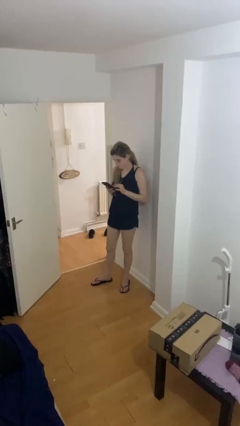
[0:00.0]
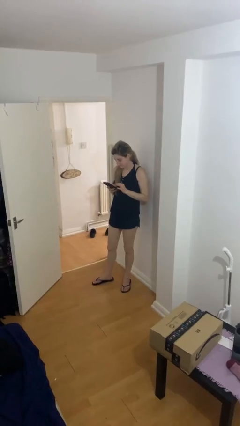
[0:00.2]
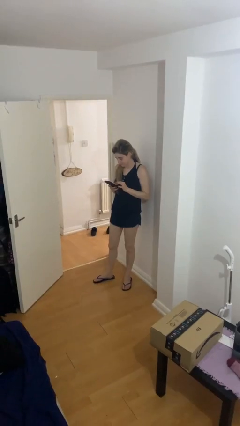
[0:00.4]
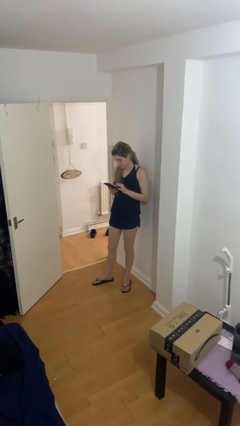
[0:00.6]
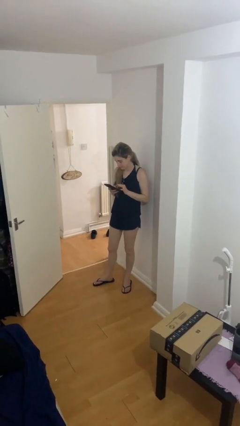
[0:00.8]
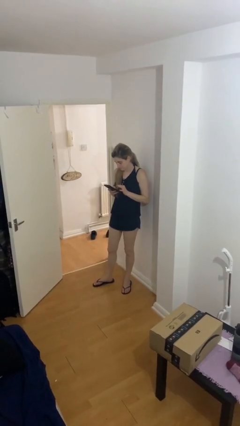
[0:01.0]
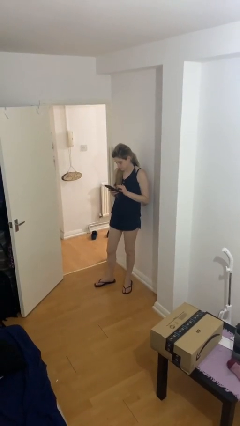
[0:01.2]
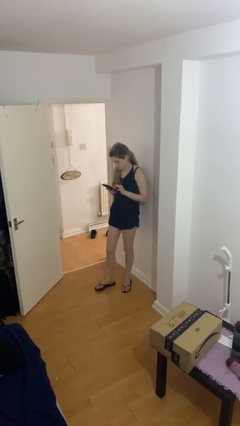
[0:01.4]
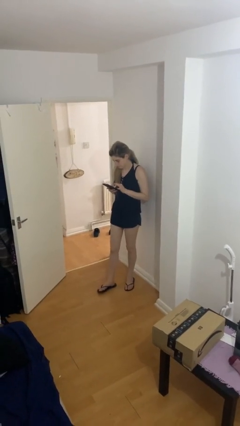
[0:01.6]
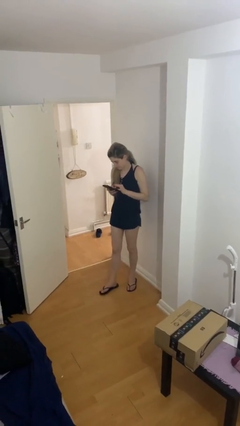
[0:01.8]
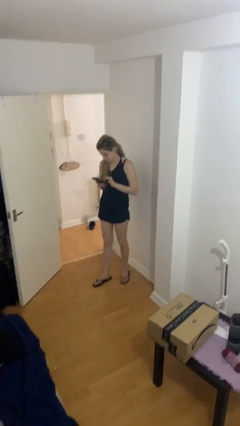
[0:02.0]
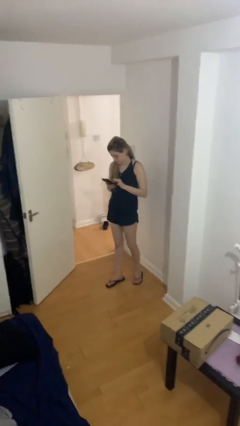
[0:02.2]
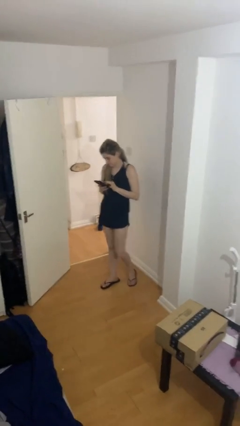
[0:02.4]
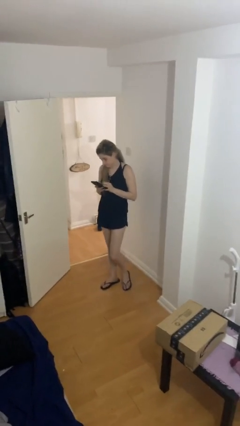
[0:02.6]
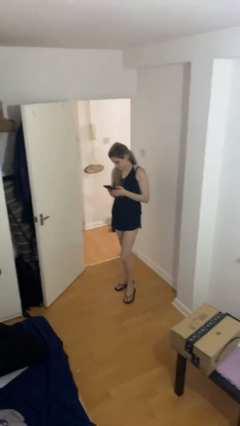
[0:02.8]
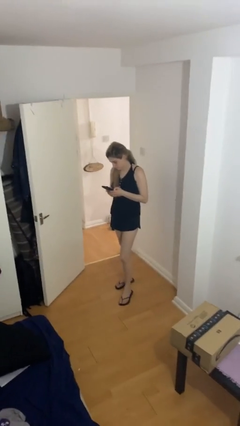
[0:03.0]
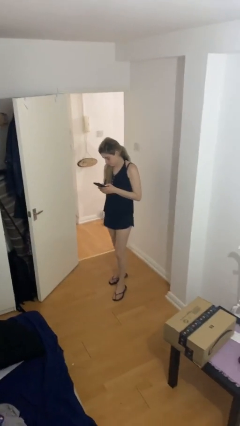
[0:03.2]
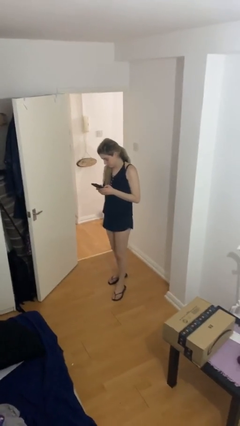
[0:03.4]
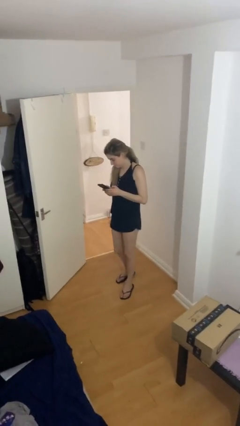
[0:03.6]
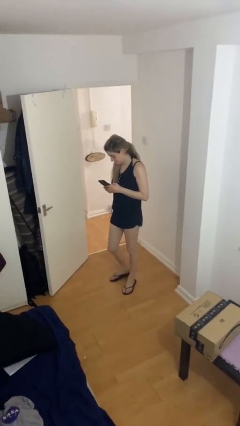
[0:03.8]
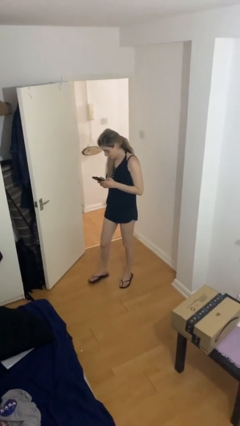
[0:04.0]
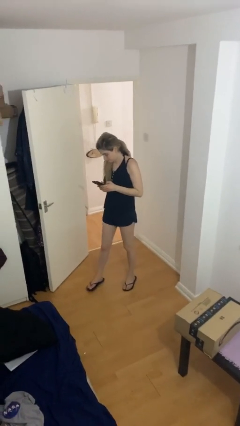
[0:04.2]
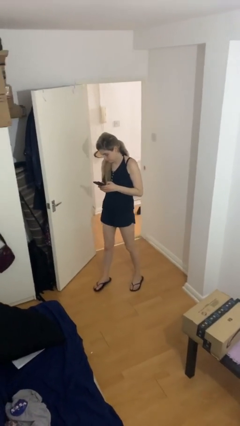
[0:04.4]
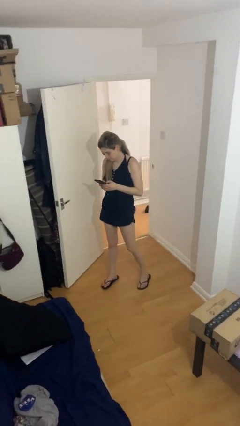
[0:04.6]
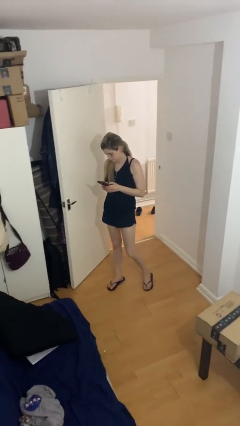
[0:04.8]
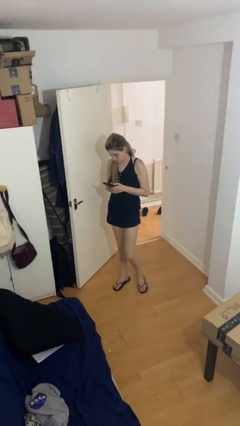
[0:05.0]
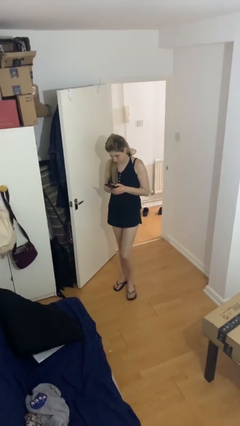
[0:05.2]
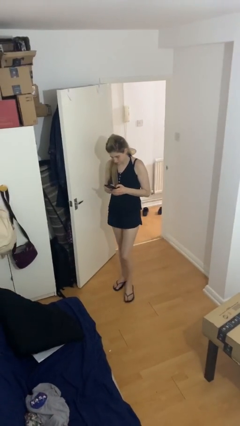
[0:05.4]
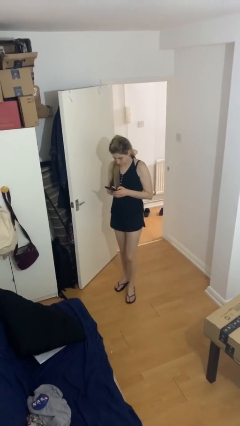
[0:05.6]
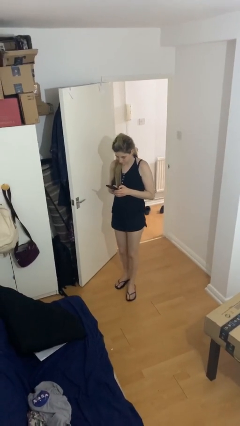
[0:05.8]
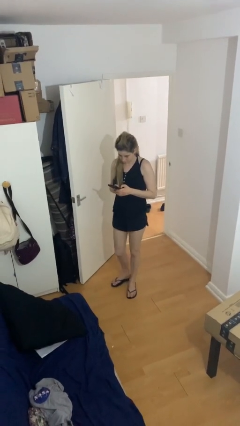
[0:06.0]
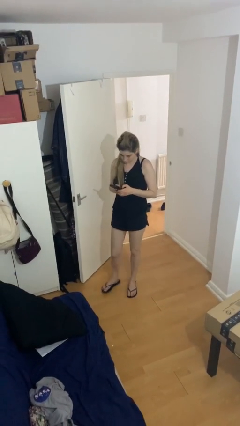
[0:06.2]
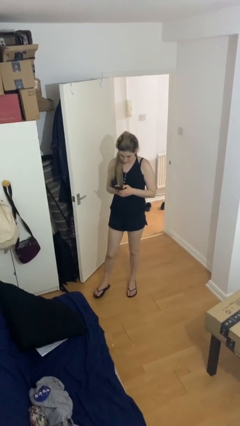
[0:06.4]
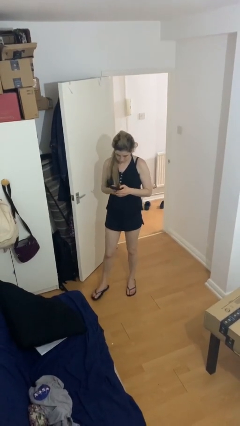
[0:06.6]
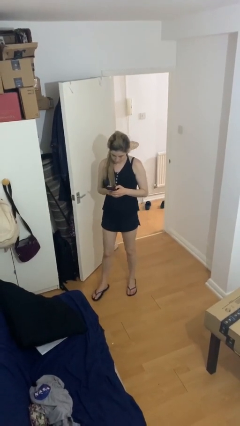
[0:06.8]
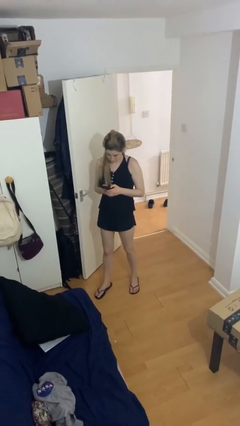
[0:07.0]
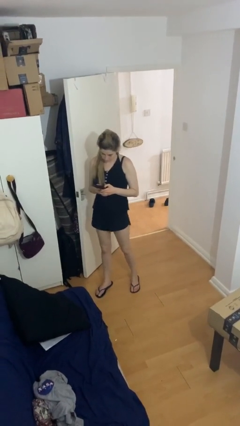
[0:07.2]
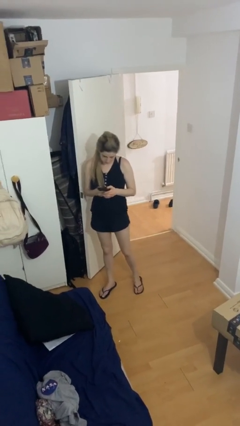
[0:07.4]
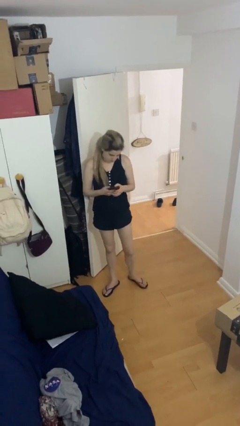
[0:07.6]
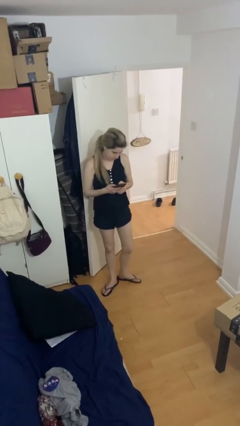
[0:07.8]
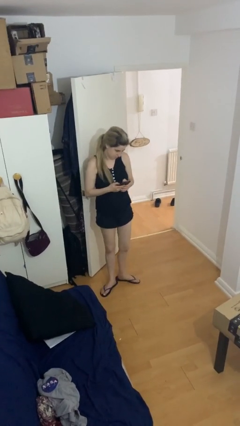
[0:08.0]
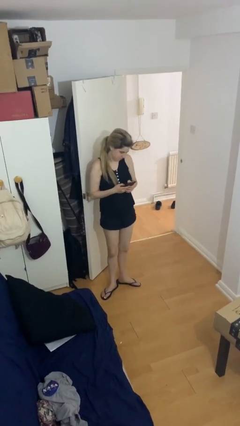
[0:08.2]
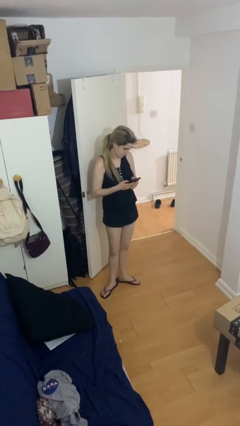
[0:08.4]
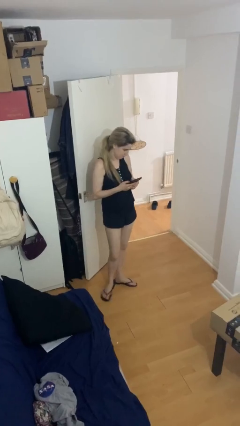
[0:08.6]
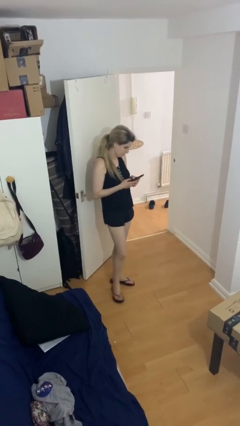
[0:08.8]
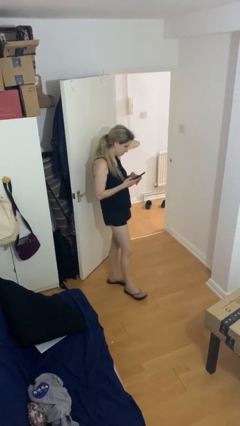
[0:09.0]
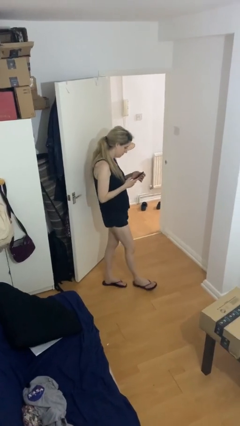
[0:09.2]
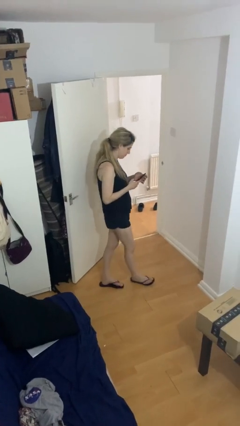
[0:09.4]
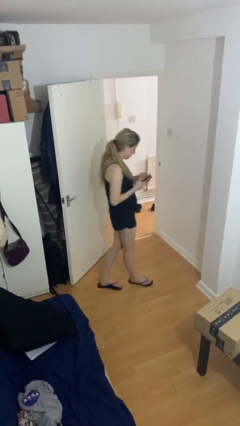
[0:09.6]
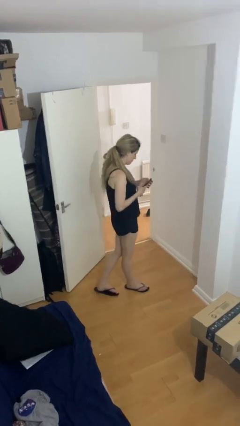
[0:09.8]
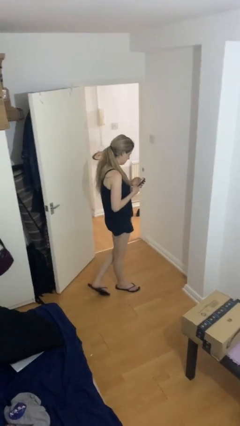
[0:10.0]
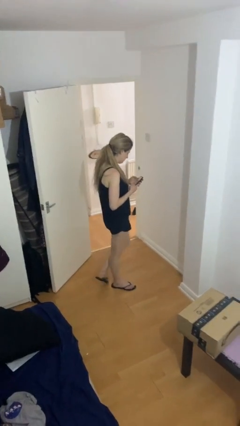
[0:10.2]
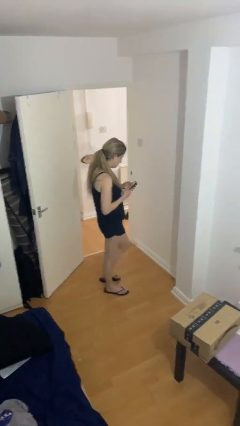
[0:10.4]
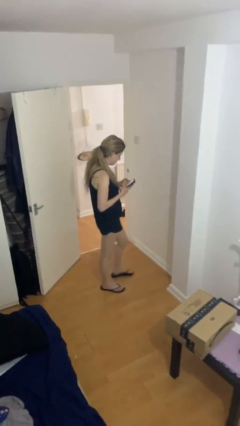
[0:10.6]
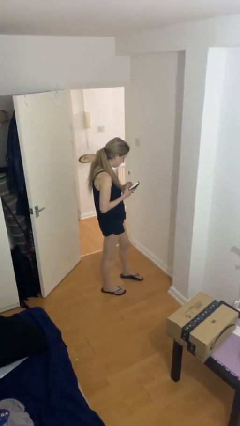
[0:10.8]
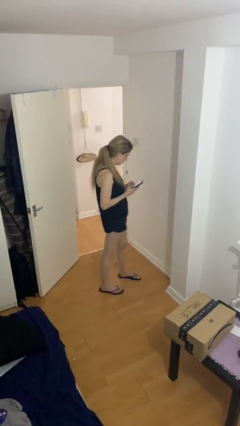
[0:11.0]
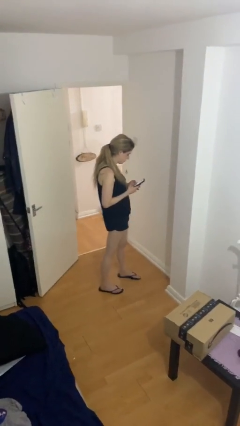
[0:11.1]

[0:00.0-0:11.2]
person texts on phone

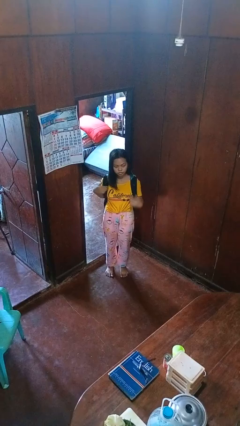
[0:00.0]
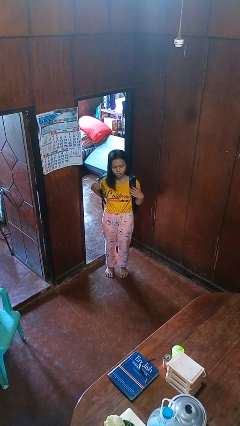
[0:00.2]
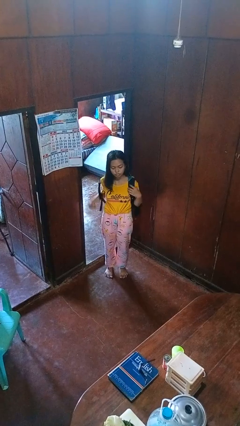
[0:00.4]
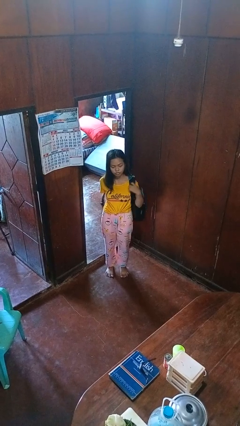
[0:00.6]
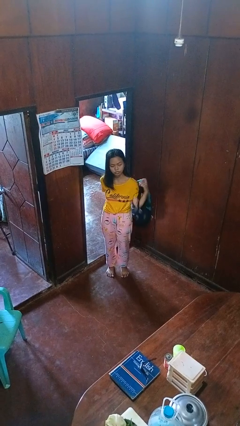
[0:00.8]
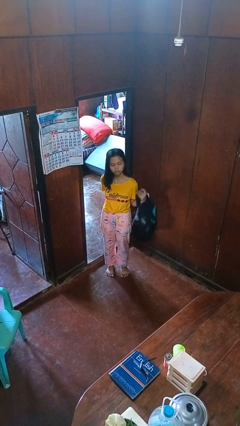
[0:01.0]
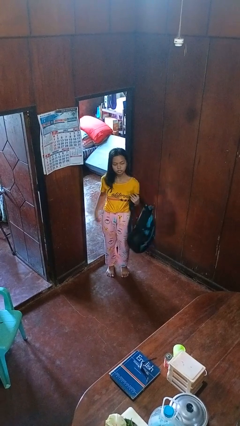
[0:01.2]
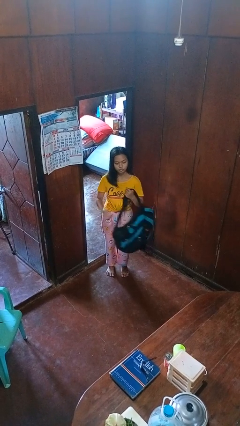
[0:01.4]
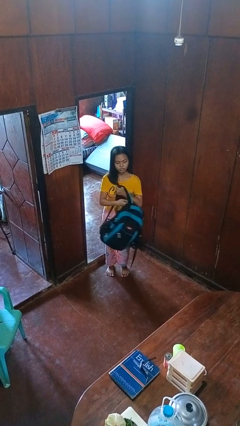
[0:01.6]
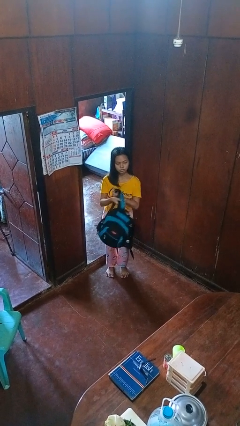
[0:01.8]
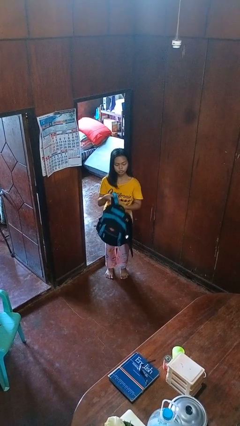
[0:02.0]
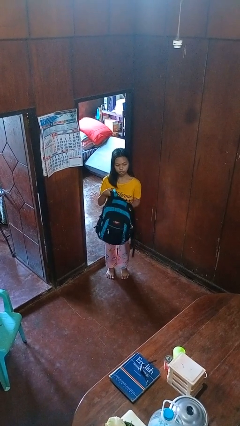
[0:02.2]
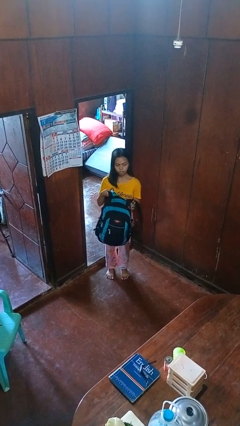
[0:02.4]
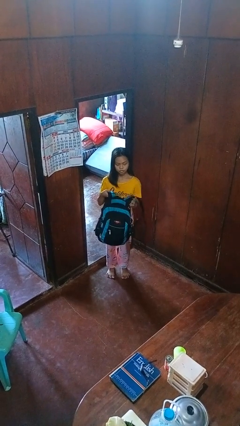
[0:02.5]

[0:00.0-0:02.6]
person takes off backpack

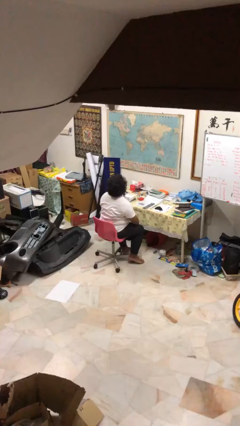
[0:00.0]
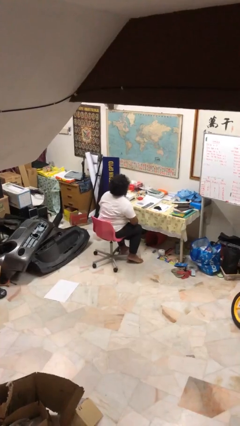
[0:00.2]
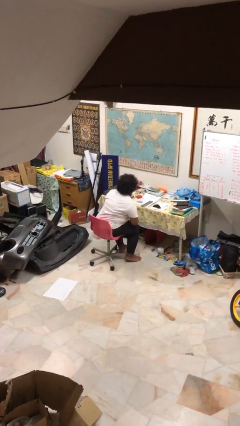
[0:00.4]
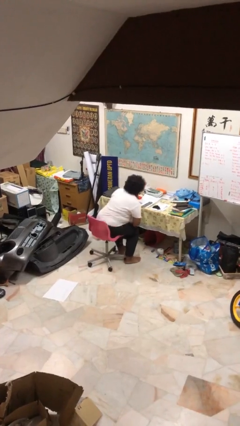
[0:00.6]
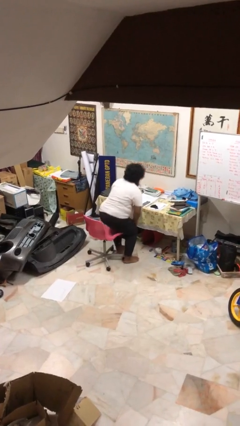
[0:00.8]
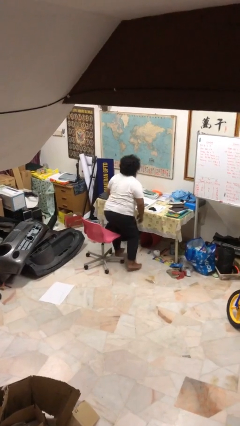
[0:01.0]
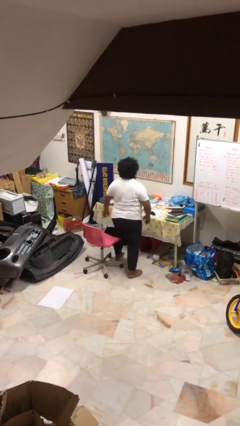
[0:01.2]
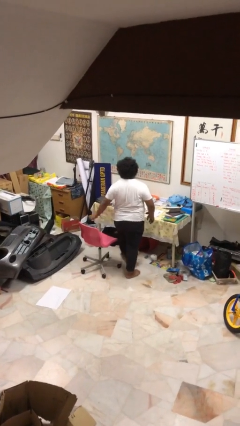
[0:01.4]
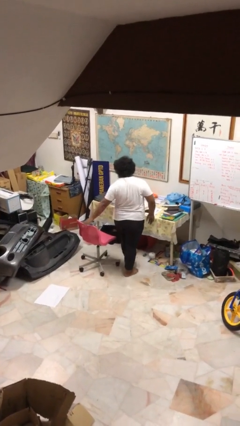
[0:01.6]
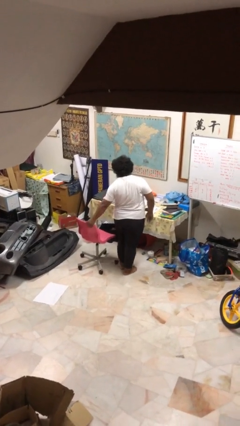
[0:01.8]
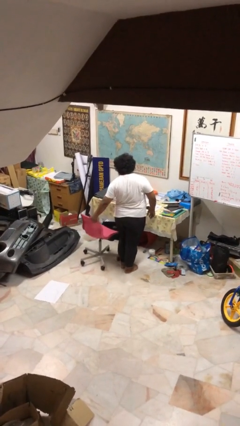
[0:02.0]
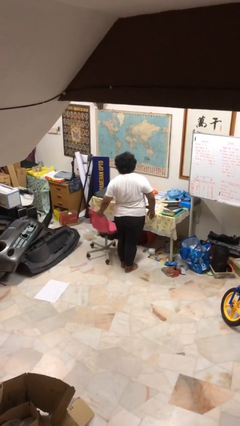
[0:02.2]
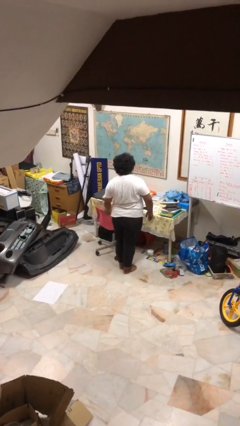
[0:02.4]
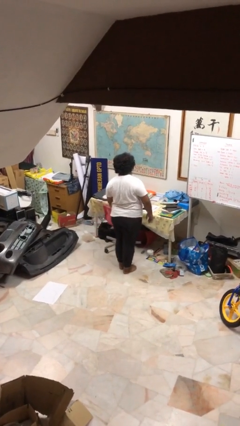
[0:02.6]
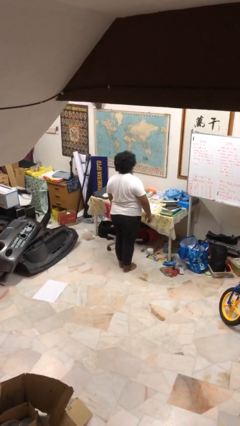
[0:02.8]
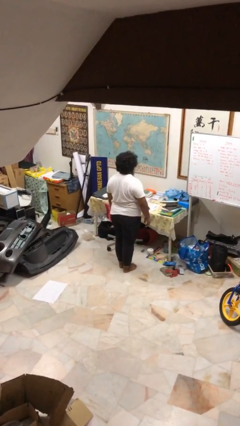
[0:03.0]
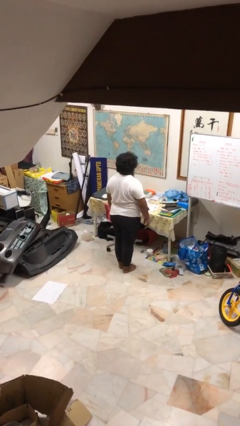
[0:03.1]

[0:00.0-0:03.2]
person stands up

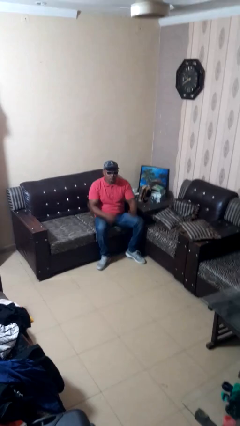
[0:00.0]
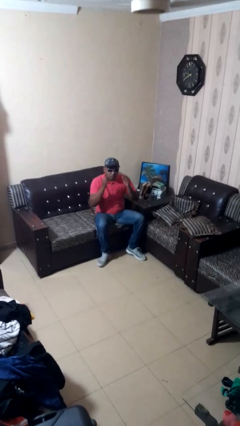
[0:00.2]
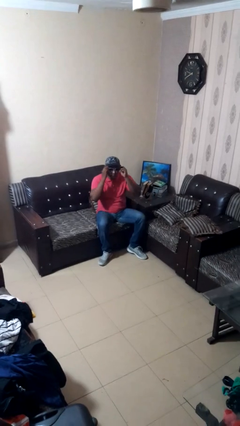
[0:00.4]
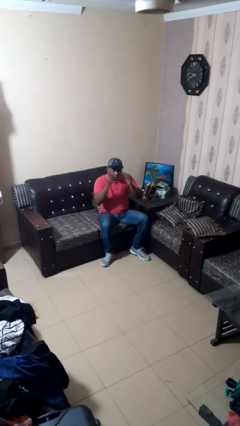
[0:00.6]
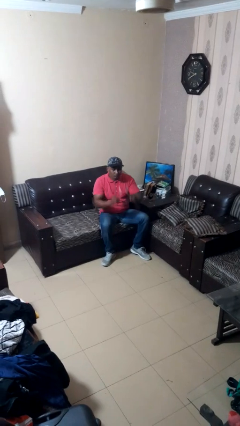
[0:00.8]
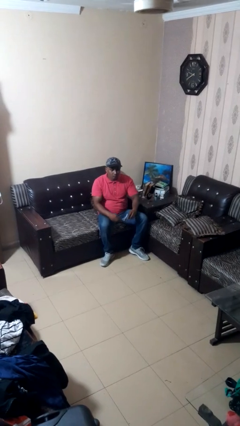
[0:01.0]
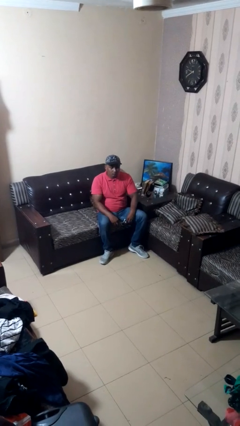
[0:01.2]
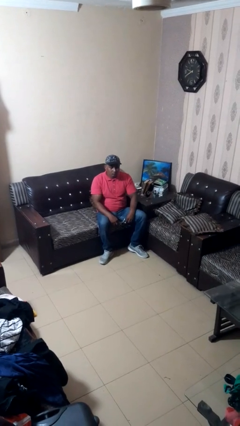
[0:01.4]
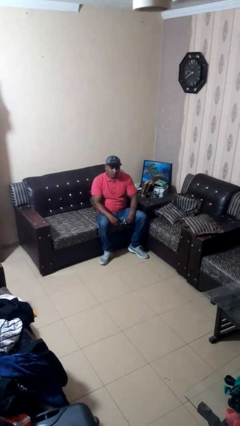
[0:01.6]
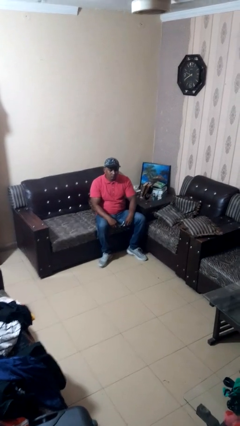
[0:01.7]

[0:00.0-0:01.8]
person takes off sunglasses
